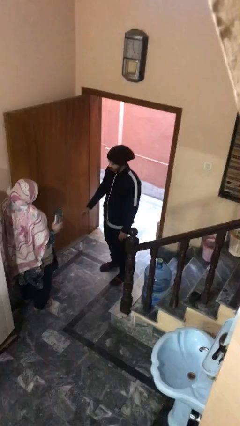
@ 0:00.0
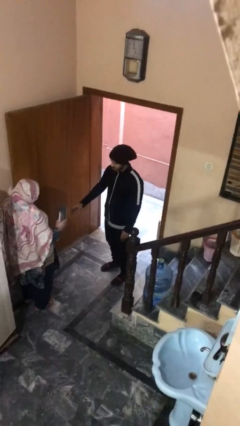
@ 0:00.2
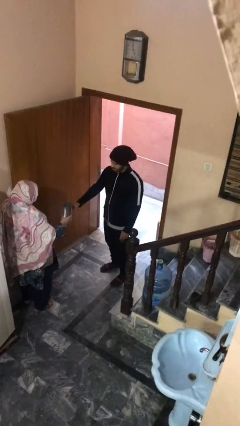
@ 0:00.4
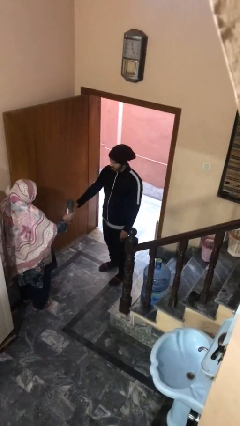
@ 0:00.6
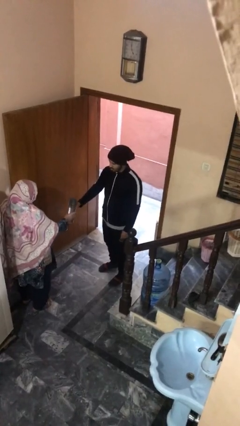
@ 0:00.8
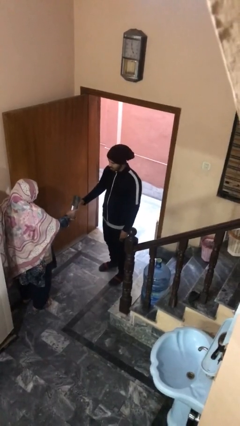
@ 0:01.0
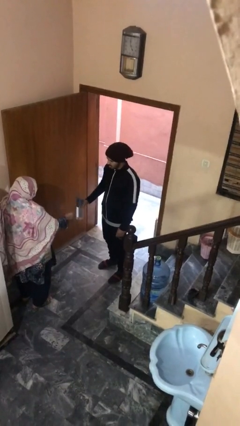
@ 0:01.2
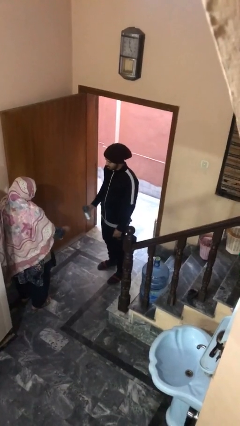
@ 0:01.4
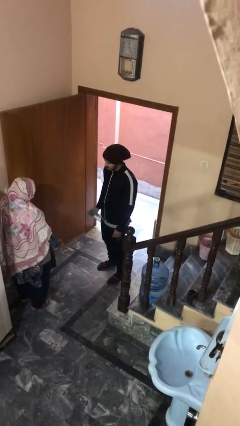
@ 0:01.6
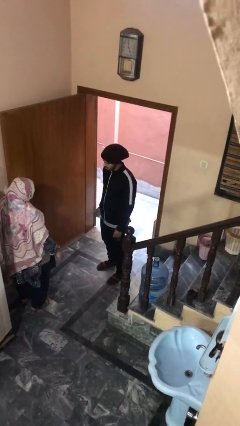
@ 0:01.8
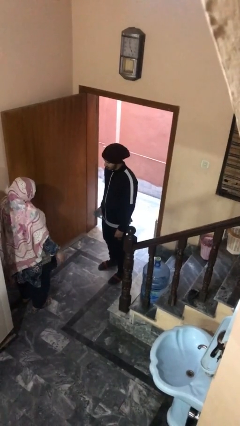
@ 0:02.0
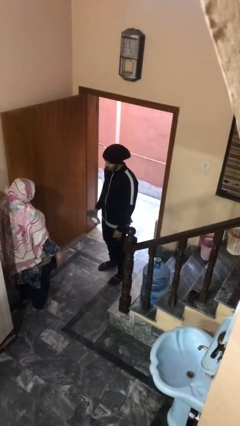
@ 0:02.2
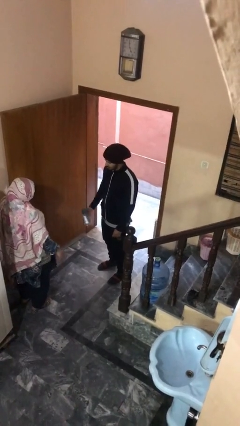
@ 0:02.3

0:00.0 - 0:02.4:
person transfers object to person

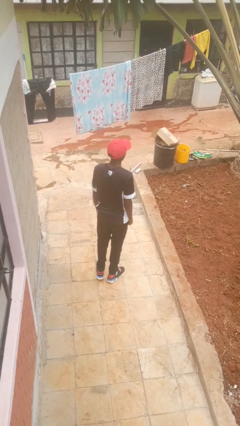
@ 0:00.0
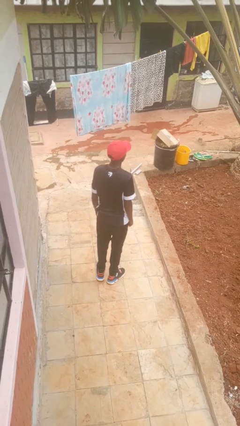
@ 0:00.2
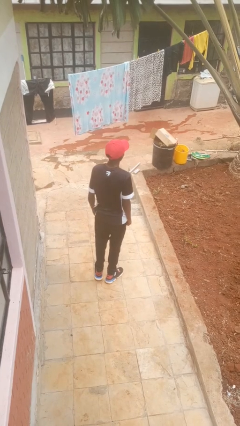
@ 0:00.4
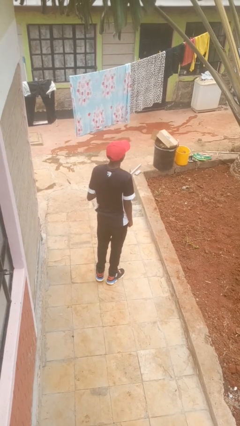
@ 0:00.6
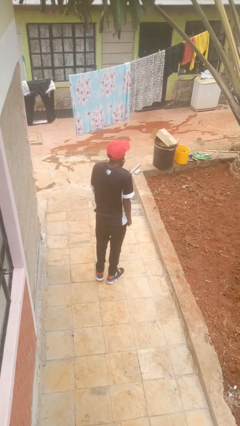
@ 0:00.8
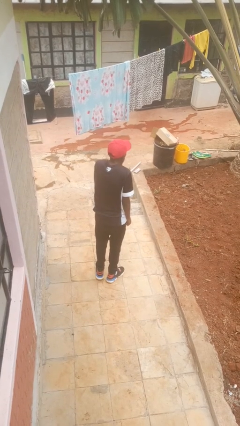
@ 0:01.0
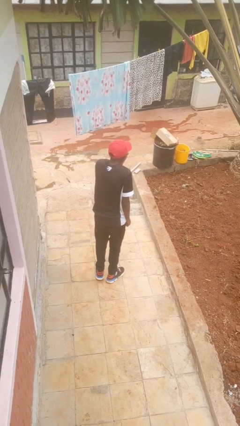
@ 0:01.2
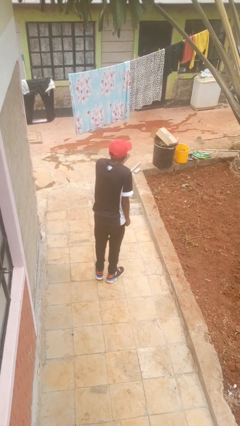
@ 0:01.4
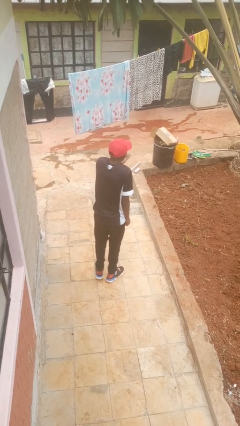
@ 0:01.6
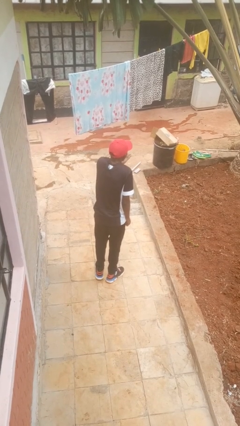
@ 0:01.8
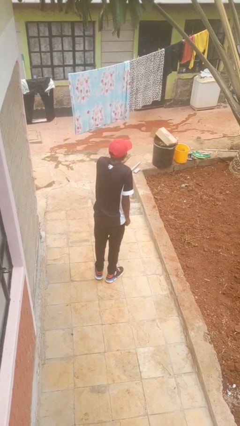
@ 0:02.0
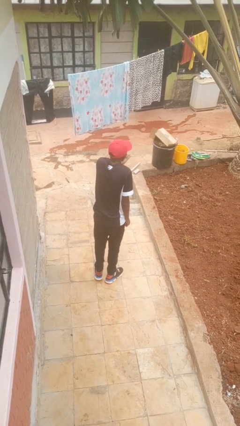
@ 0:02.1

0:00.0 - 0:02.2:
person gestures blow kiss

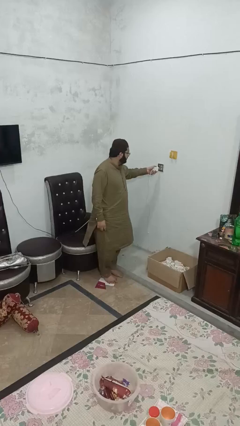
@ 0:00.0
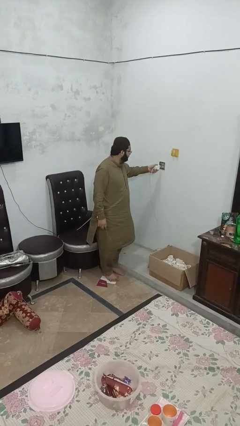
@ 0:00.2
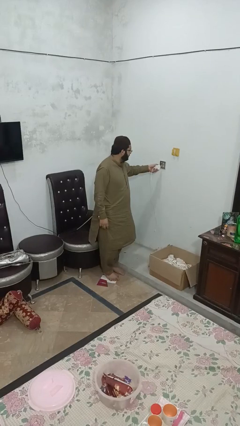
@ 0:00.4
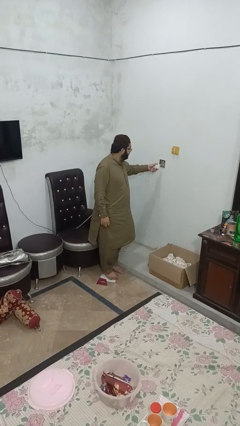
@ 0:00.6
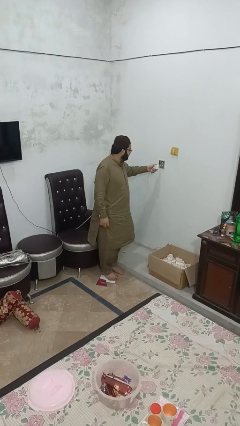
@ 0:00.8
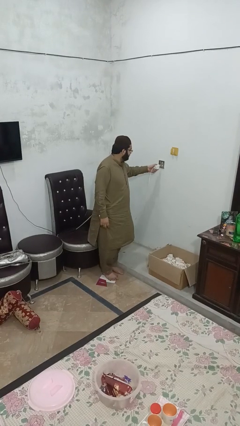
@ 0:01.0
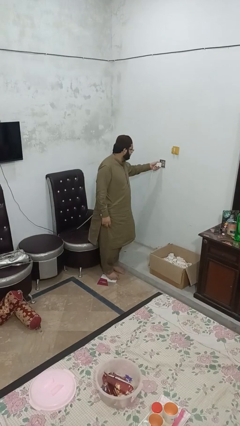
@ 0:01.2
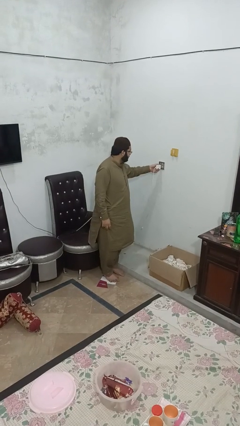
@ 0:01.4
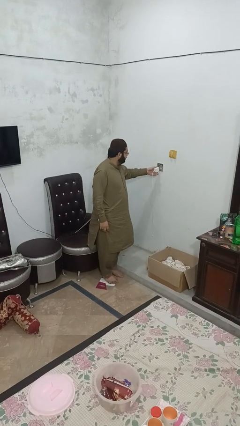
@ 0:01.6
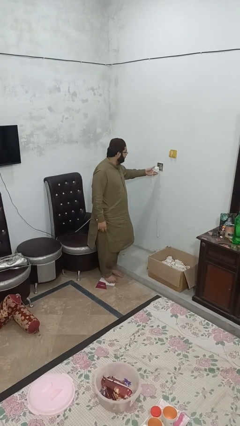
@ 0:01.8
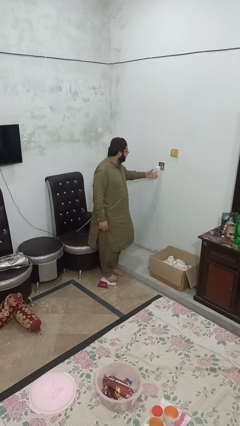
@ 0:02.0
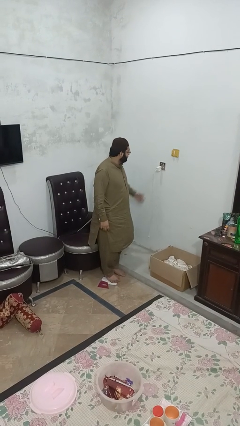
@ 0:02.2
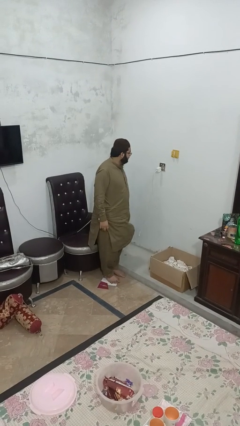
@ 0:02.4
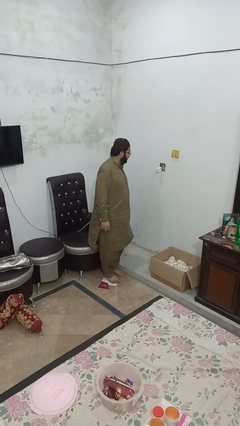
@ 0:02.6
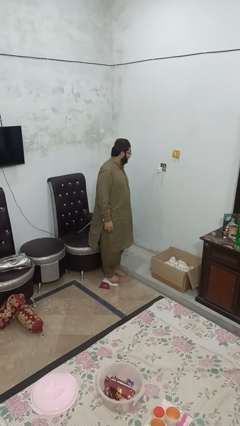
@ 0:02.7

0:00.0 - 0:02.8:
person plugs into electrical socket

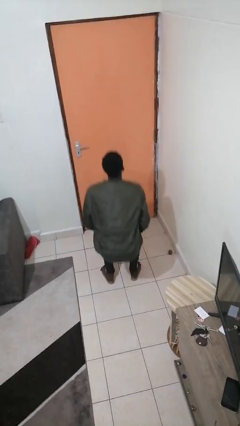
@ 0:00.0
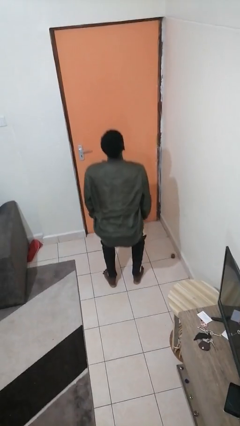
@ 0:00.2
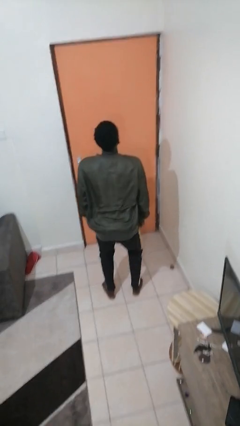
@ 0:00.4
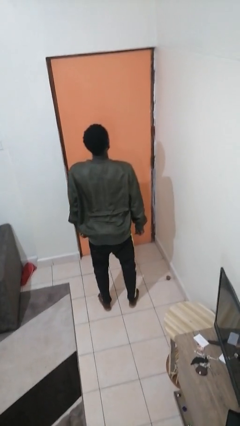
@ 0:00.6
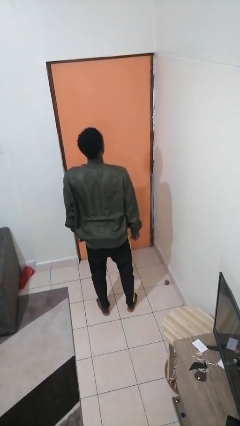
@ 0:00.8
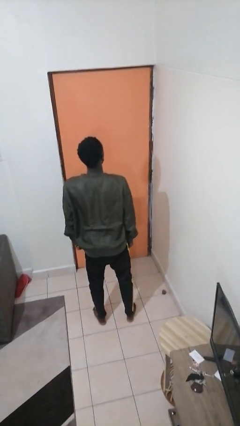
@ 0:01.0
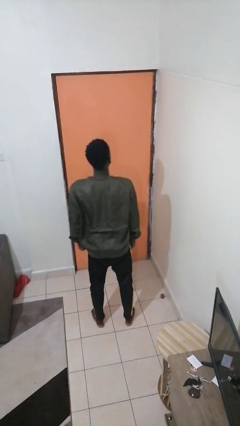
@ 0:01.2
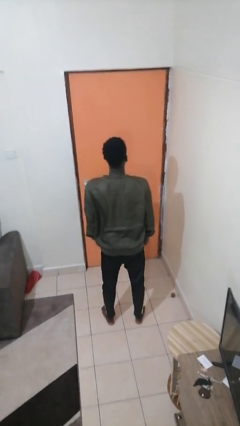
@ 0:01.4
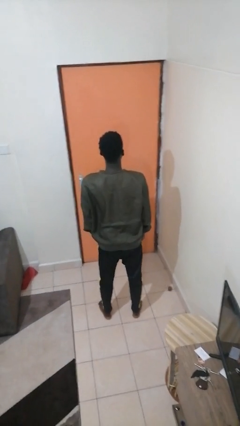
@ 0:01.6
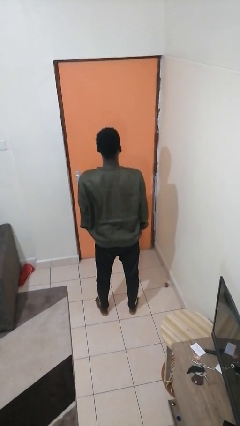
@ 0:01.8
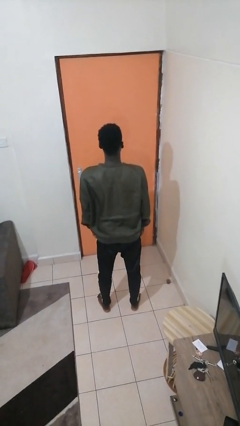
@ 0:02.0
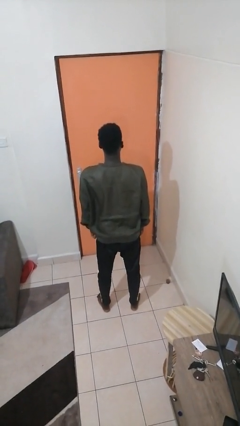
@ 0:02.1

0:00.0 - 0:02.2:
person stands up

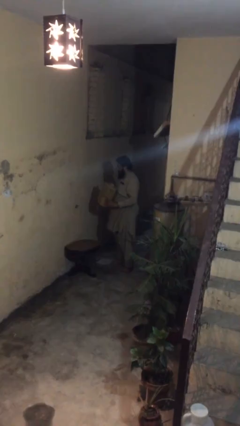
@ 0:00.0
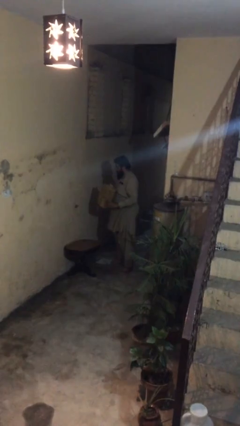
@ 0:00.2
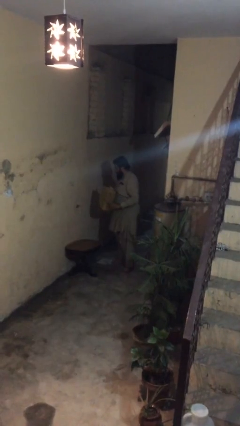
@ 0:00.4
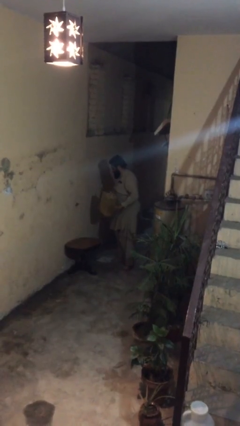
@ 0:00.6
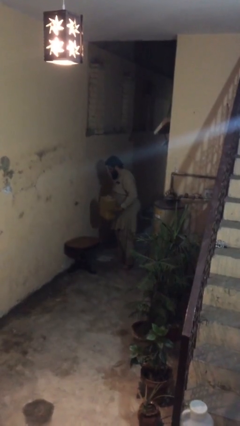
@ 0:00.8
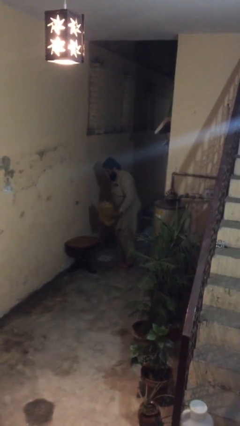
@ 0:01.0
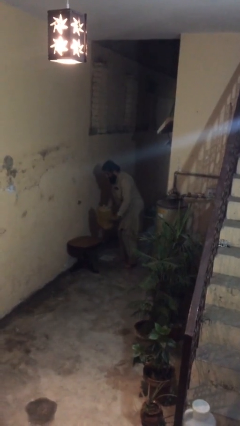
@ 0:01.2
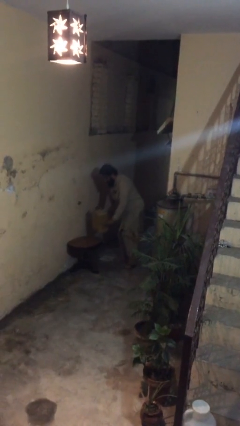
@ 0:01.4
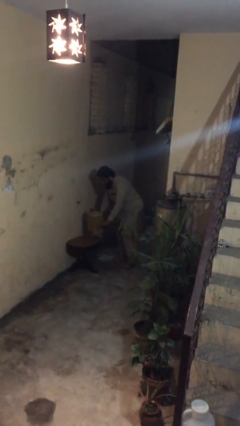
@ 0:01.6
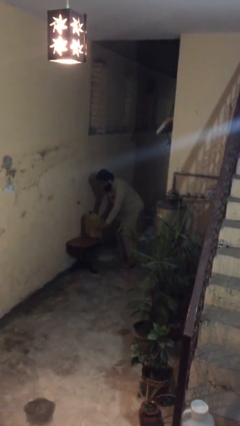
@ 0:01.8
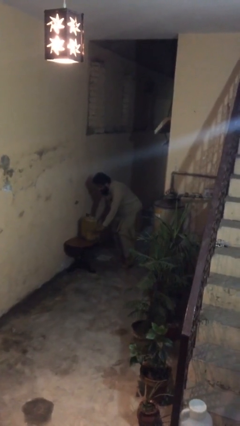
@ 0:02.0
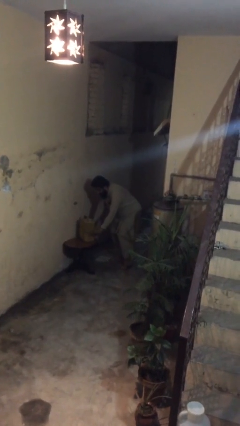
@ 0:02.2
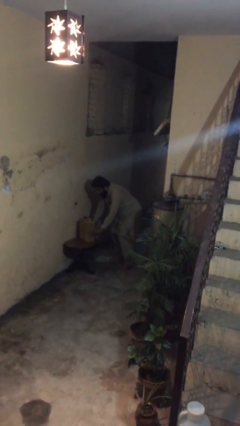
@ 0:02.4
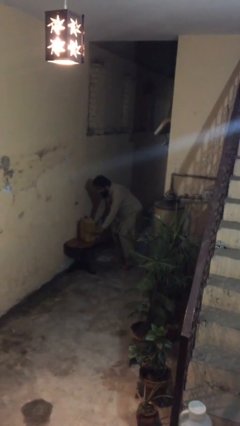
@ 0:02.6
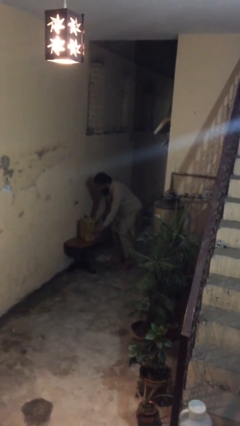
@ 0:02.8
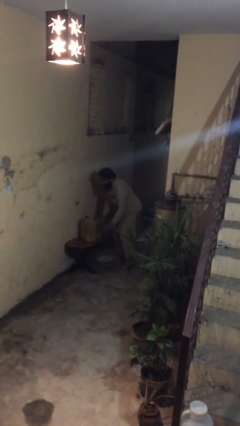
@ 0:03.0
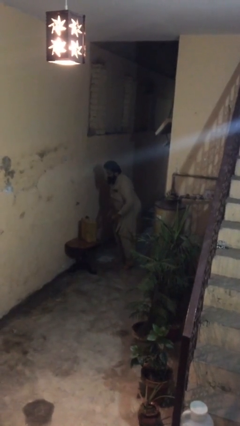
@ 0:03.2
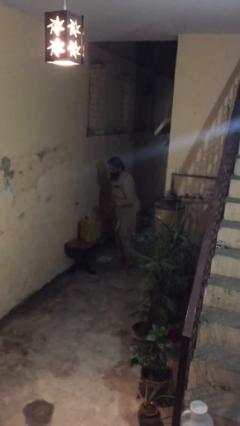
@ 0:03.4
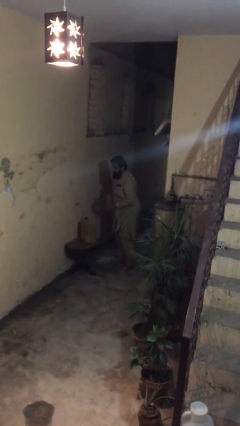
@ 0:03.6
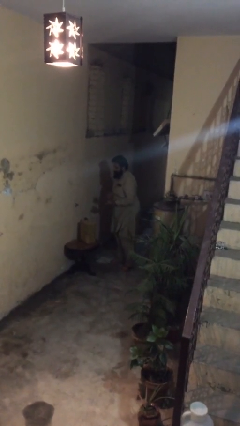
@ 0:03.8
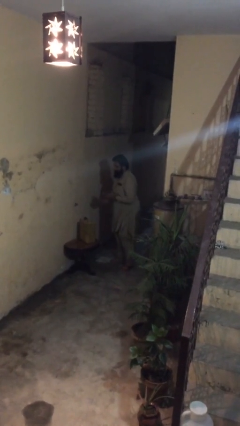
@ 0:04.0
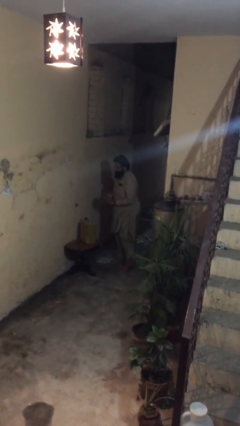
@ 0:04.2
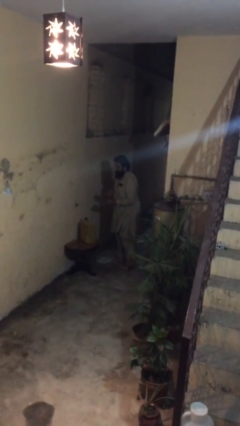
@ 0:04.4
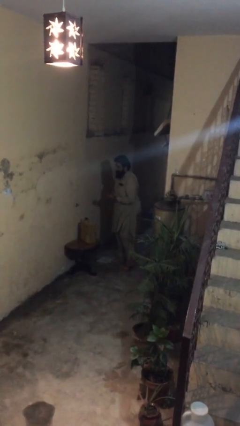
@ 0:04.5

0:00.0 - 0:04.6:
person puts down object on table

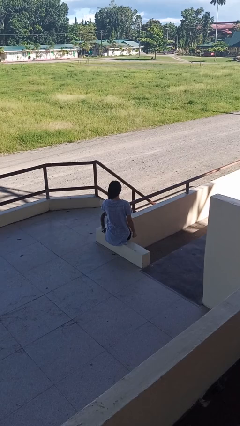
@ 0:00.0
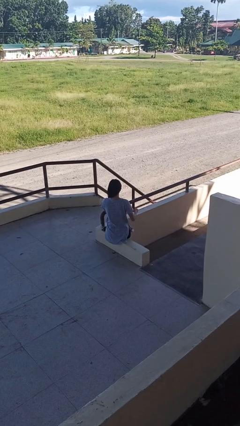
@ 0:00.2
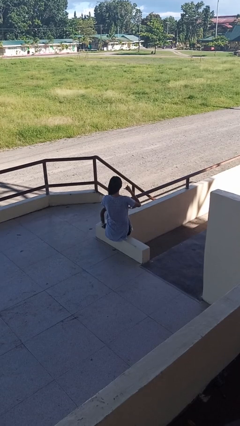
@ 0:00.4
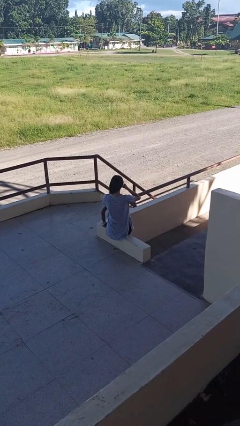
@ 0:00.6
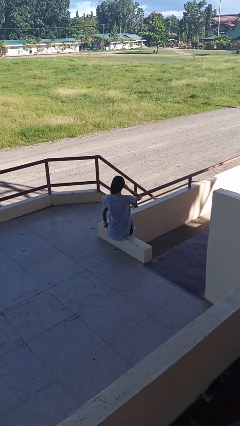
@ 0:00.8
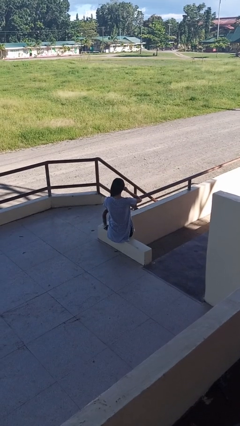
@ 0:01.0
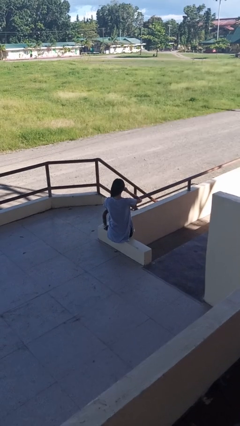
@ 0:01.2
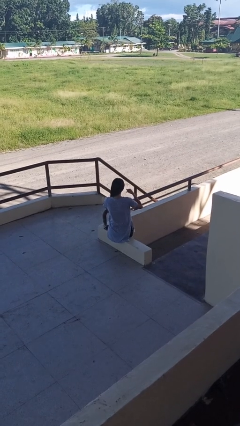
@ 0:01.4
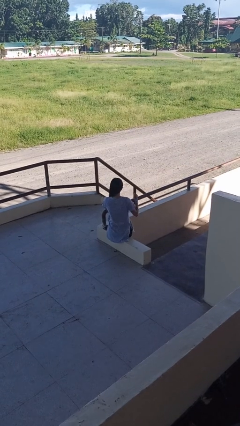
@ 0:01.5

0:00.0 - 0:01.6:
person gestures call me

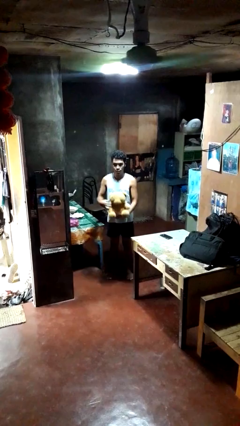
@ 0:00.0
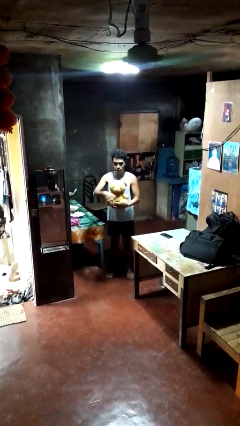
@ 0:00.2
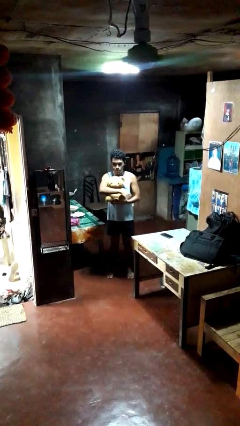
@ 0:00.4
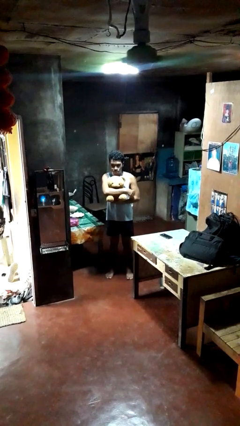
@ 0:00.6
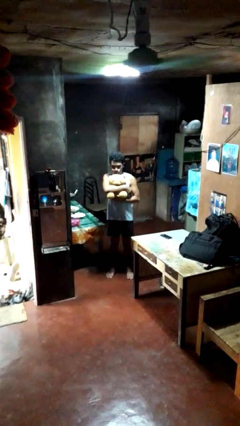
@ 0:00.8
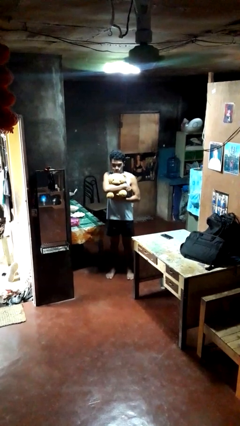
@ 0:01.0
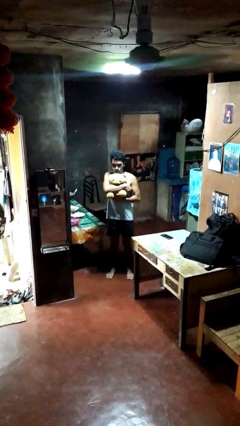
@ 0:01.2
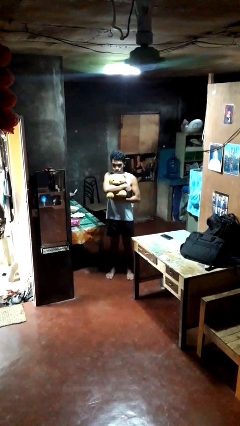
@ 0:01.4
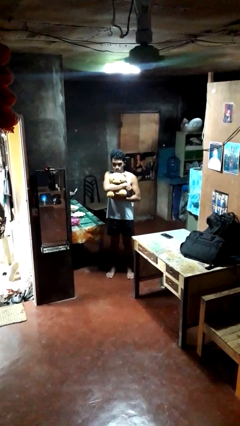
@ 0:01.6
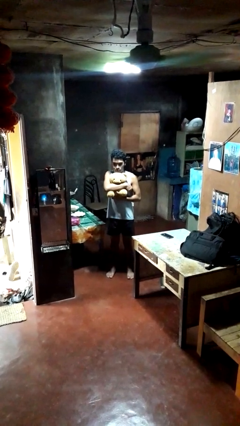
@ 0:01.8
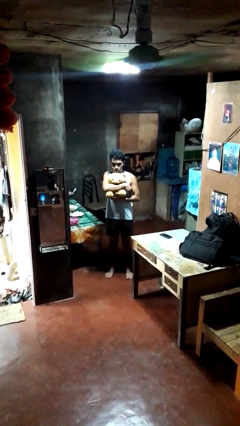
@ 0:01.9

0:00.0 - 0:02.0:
person hugs stuffed animal
